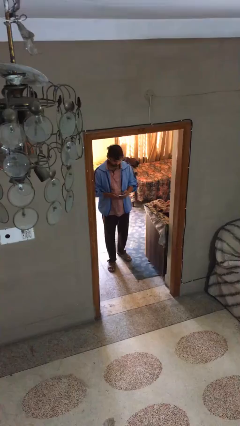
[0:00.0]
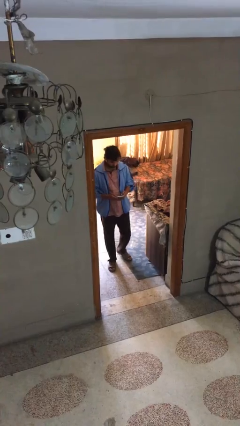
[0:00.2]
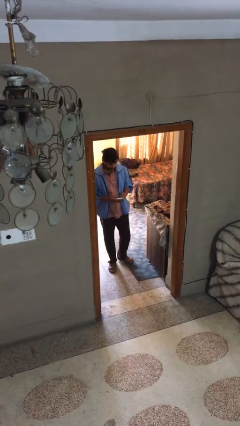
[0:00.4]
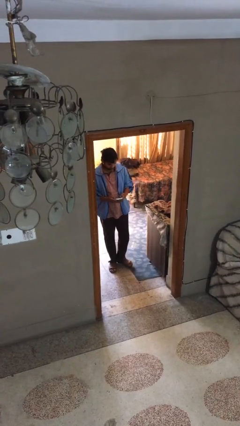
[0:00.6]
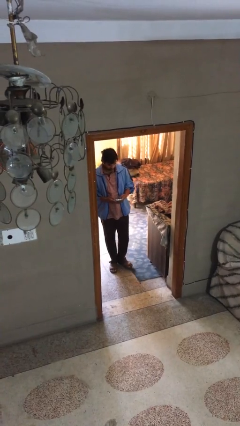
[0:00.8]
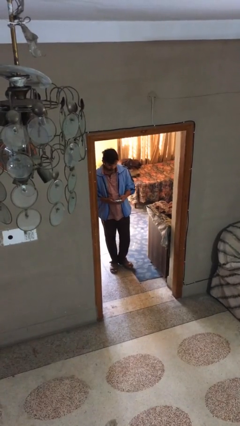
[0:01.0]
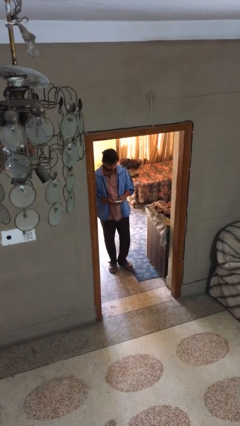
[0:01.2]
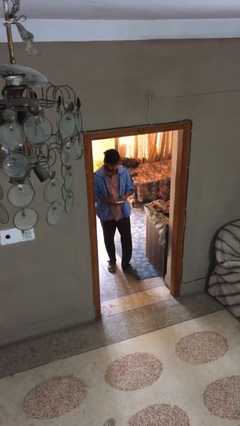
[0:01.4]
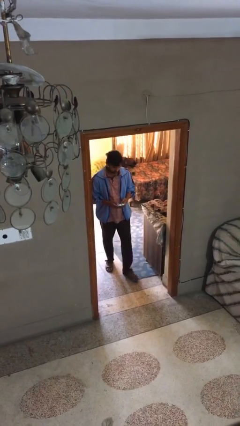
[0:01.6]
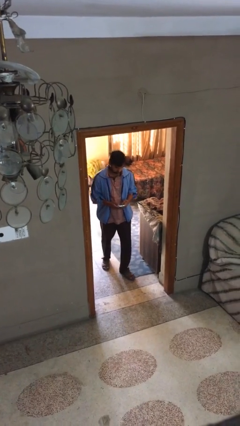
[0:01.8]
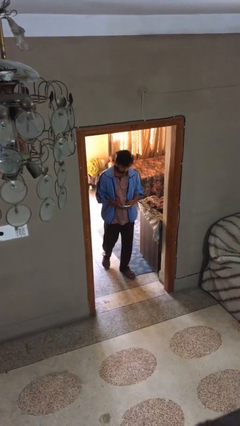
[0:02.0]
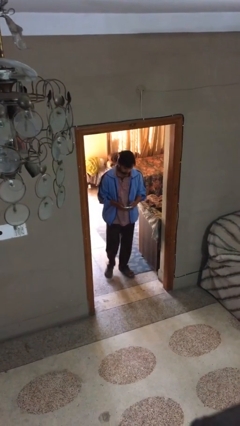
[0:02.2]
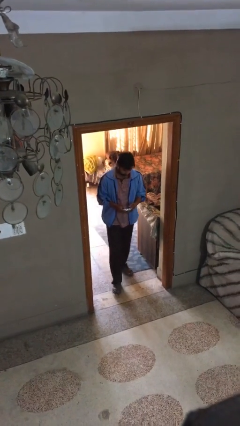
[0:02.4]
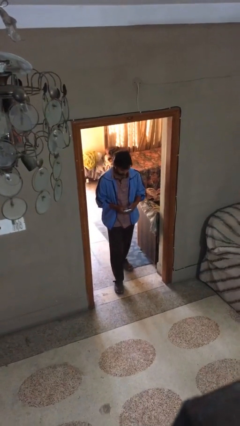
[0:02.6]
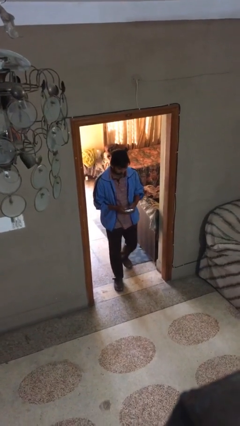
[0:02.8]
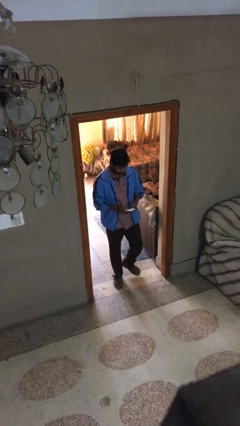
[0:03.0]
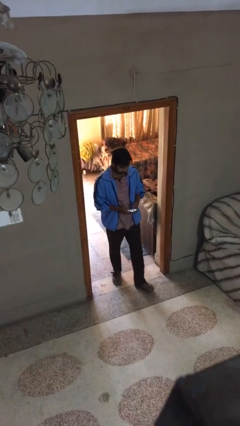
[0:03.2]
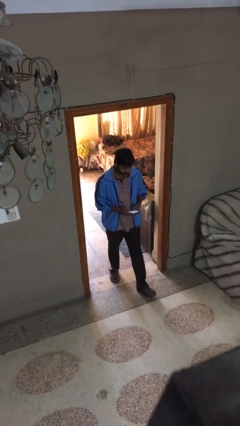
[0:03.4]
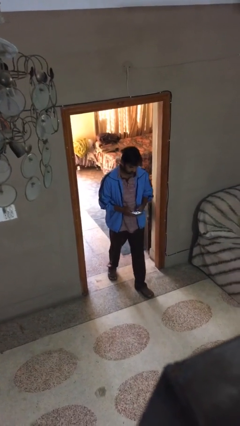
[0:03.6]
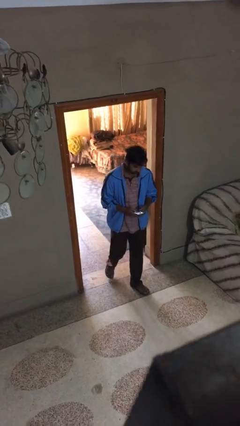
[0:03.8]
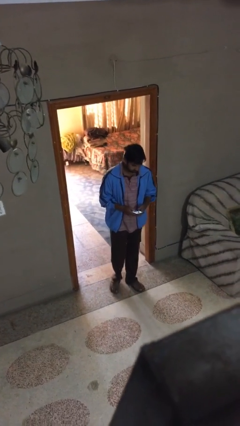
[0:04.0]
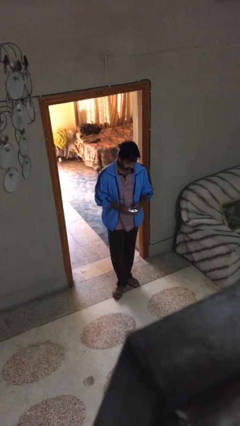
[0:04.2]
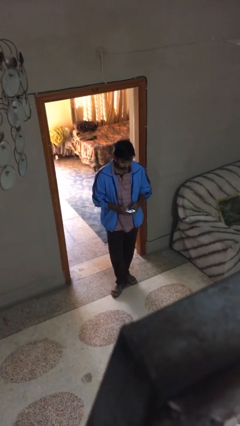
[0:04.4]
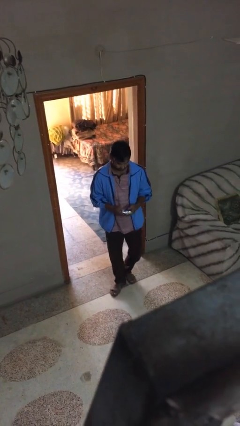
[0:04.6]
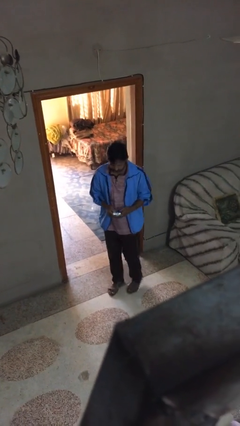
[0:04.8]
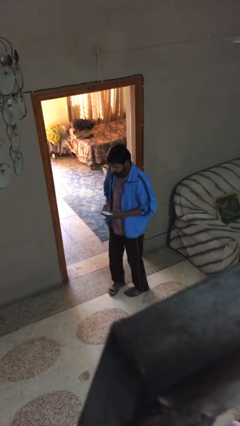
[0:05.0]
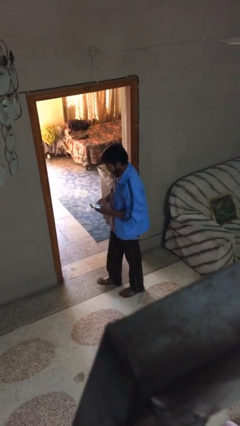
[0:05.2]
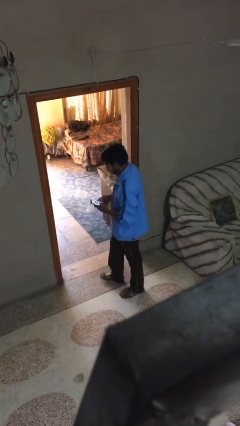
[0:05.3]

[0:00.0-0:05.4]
person enters scene through structure

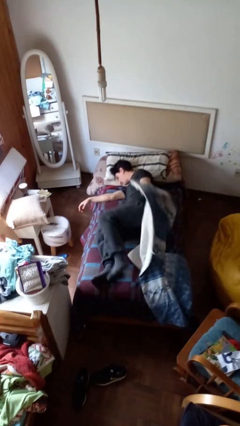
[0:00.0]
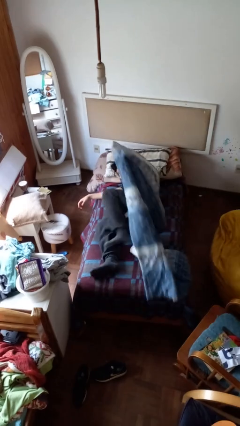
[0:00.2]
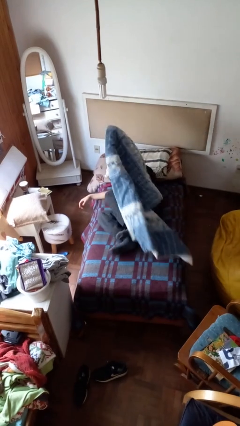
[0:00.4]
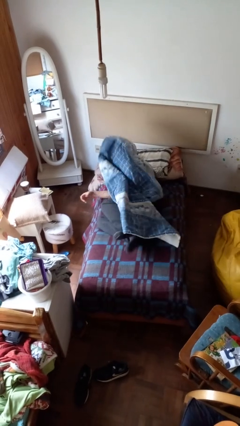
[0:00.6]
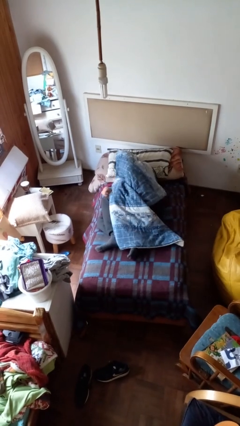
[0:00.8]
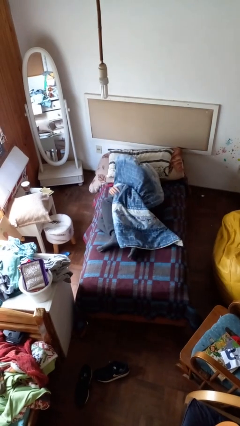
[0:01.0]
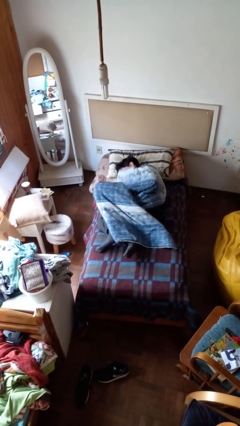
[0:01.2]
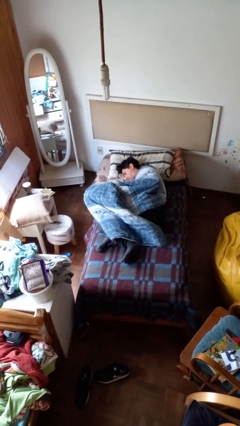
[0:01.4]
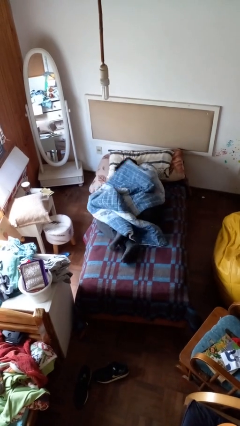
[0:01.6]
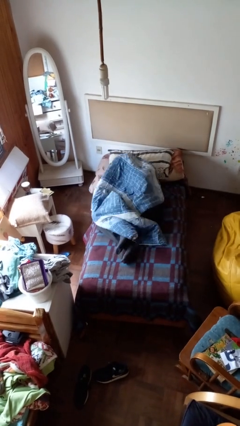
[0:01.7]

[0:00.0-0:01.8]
person covers with bedsheets

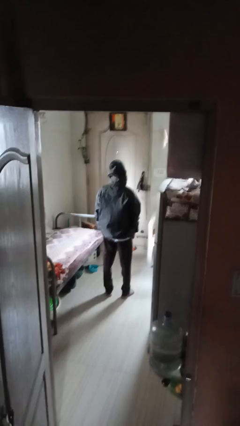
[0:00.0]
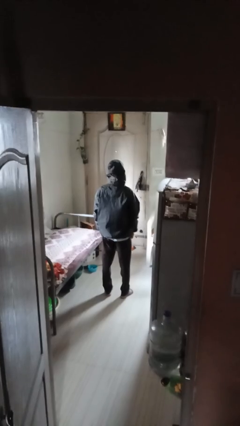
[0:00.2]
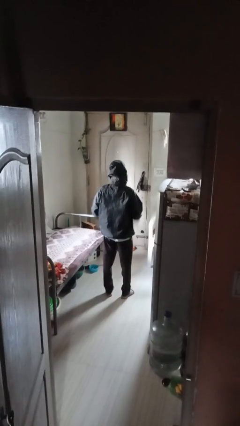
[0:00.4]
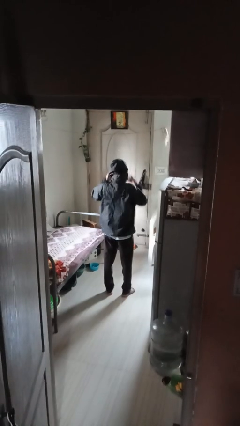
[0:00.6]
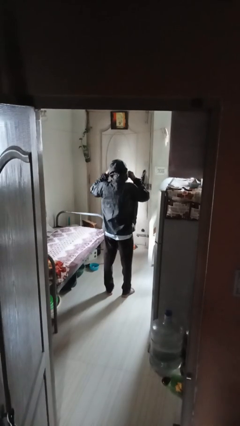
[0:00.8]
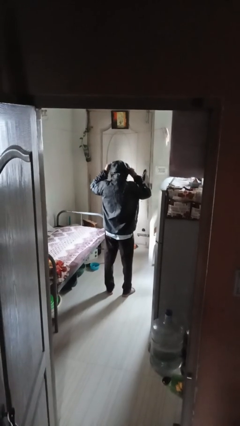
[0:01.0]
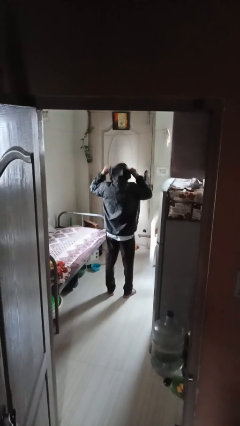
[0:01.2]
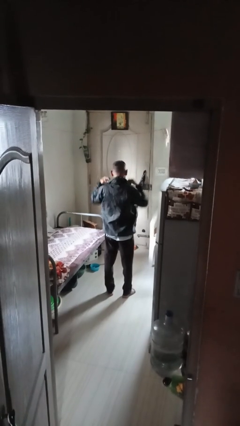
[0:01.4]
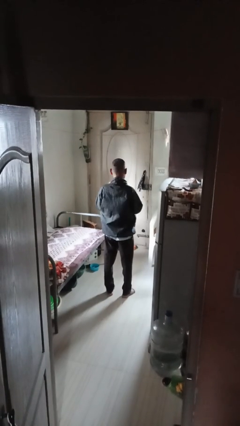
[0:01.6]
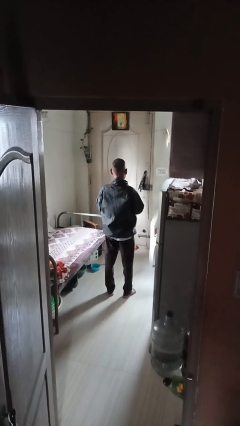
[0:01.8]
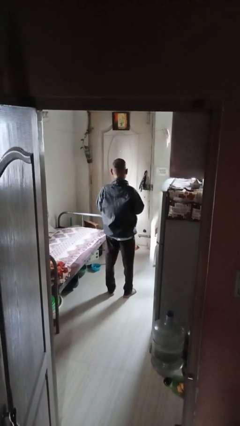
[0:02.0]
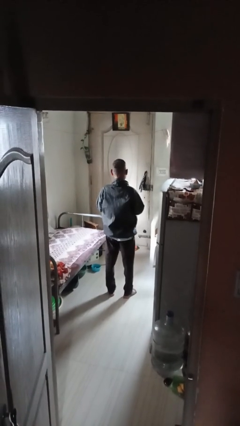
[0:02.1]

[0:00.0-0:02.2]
person takes off hoodie

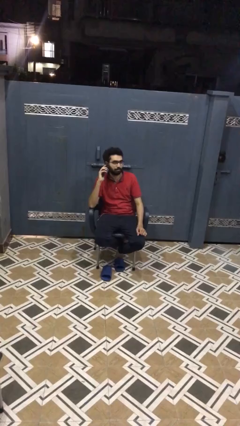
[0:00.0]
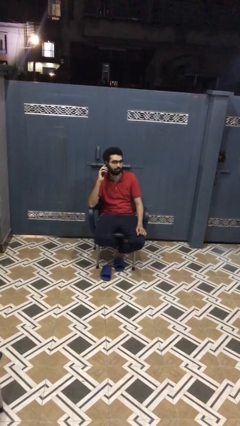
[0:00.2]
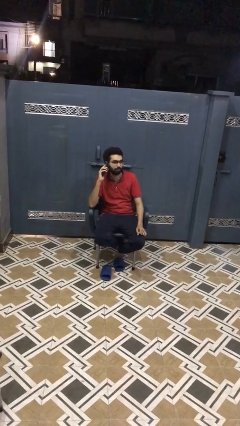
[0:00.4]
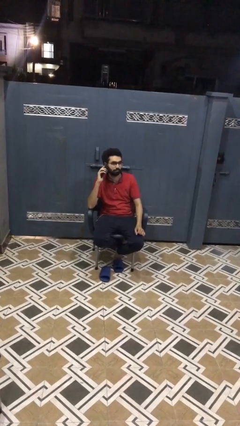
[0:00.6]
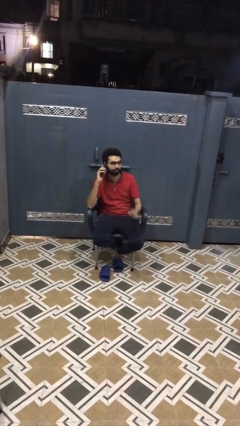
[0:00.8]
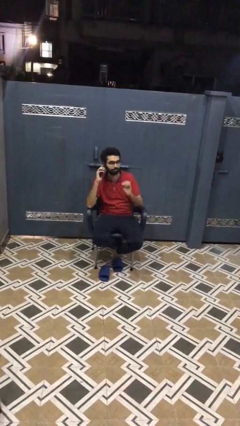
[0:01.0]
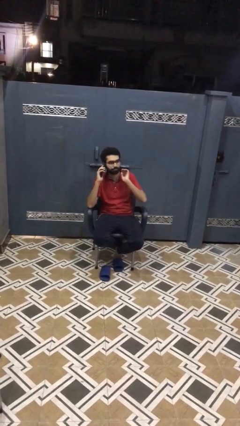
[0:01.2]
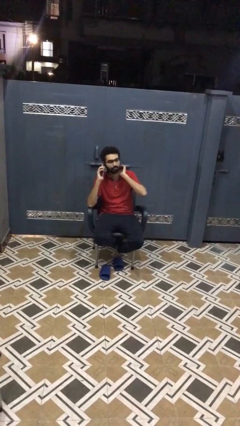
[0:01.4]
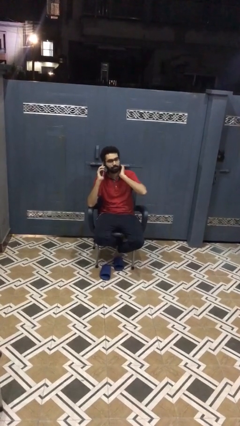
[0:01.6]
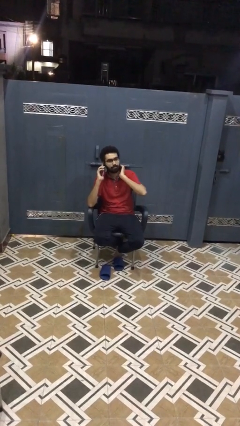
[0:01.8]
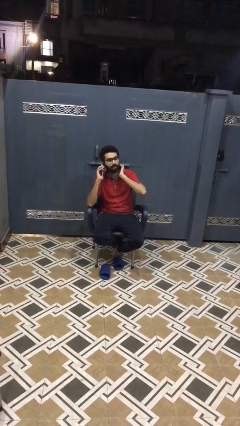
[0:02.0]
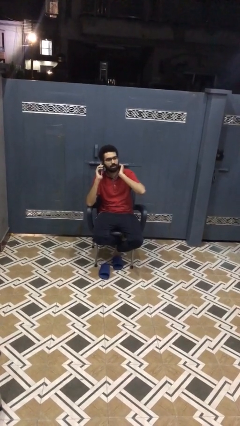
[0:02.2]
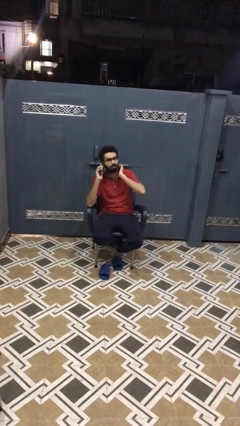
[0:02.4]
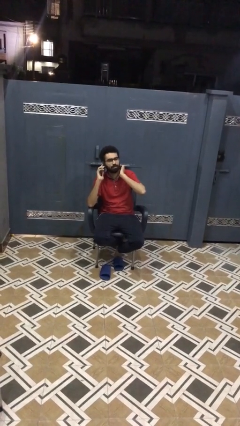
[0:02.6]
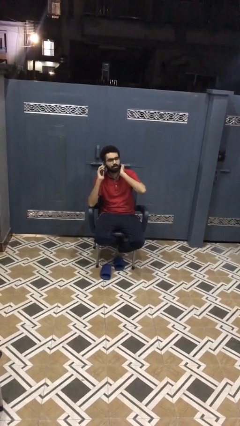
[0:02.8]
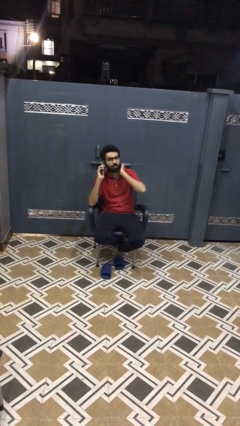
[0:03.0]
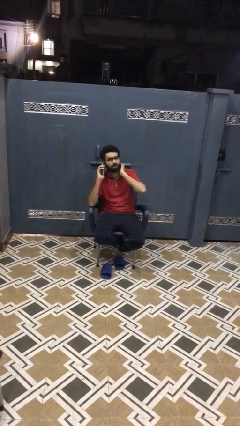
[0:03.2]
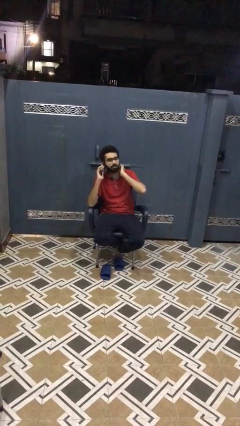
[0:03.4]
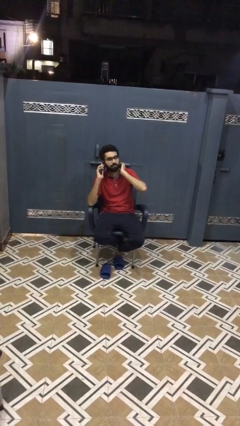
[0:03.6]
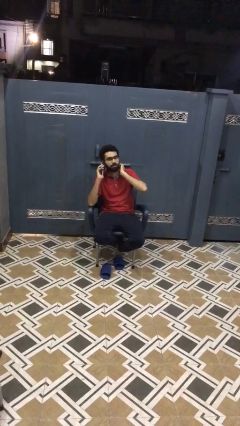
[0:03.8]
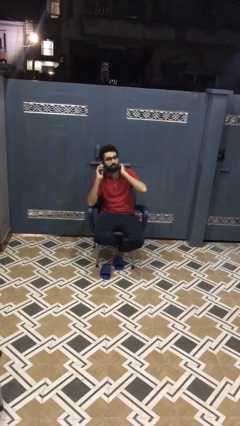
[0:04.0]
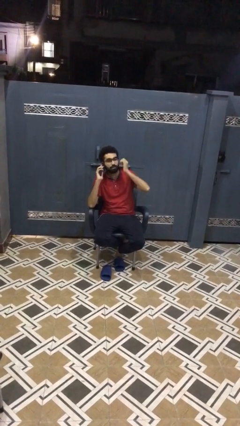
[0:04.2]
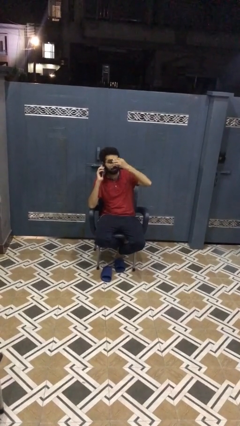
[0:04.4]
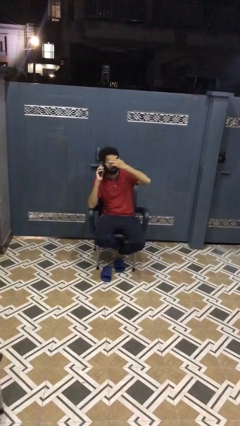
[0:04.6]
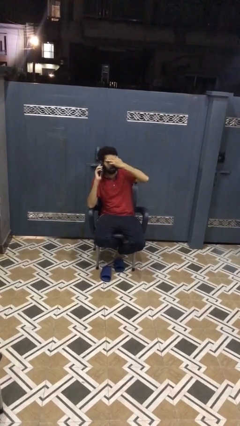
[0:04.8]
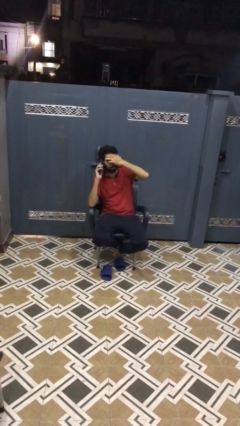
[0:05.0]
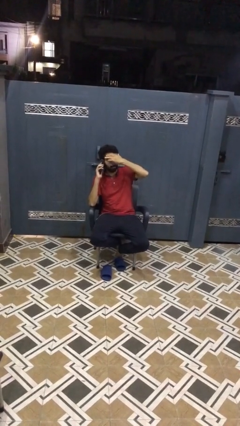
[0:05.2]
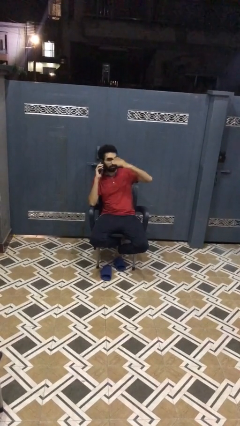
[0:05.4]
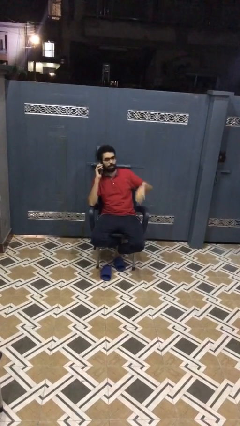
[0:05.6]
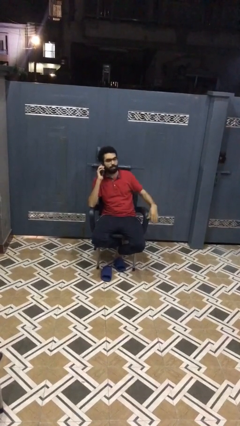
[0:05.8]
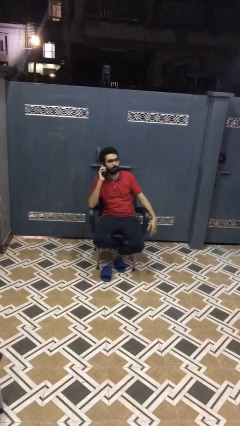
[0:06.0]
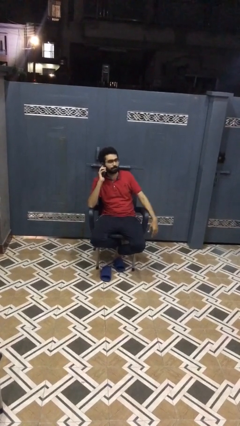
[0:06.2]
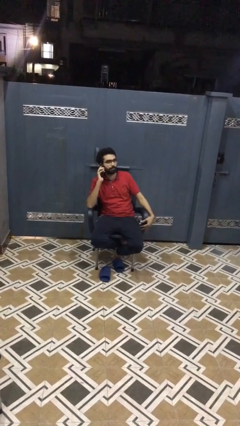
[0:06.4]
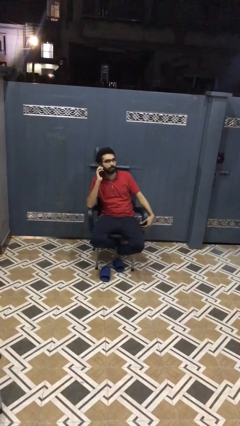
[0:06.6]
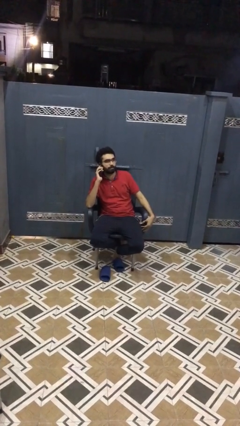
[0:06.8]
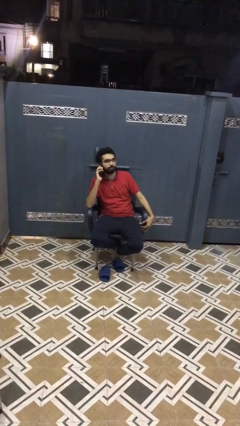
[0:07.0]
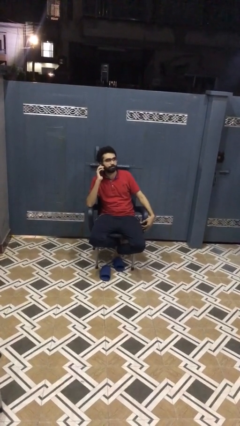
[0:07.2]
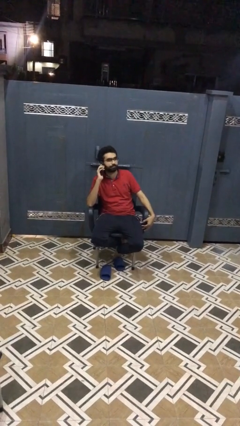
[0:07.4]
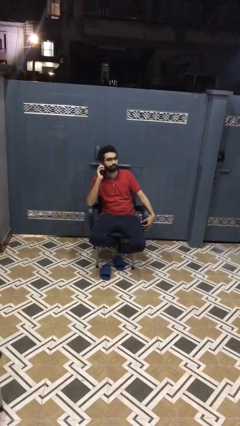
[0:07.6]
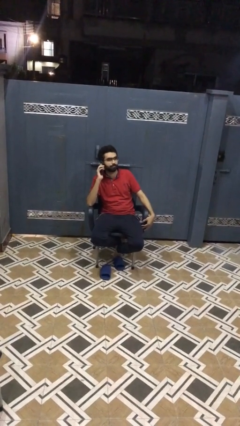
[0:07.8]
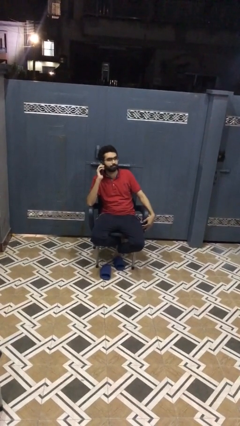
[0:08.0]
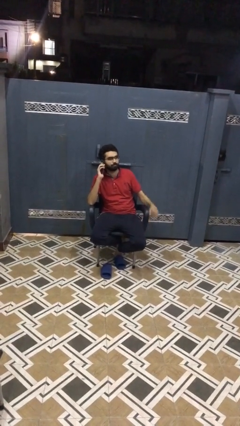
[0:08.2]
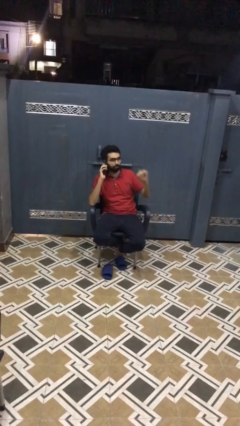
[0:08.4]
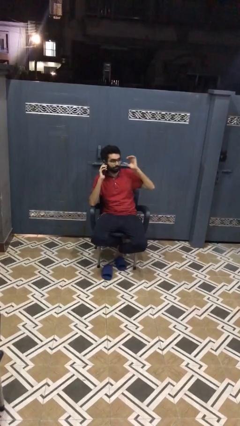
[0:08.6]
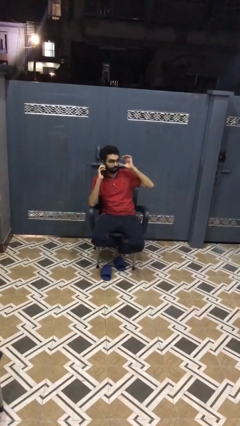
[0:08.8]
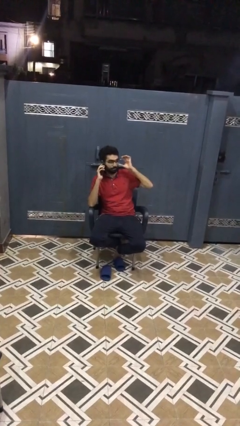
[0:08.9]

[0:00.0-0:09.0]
person talks on phone
